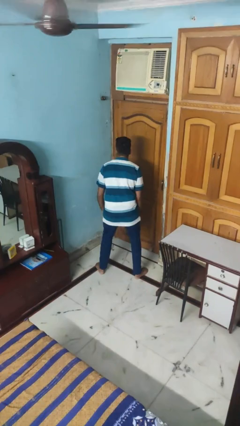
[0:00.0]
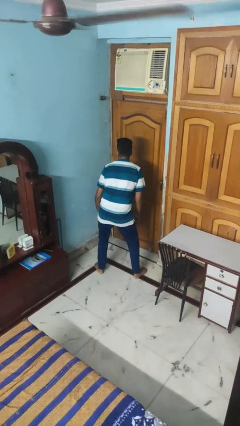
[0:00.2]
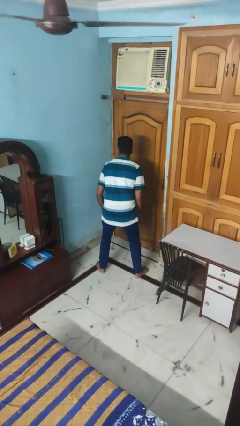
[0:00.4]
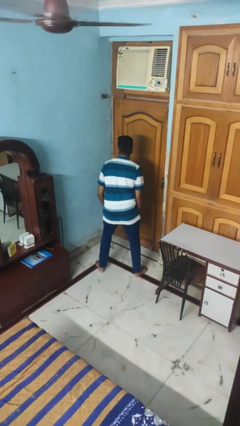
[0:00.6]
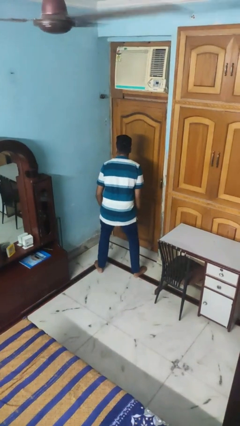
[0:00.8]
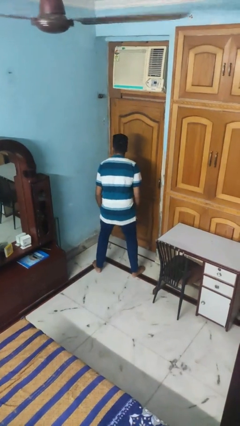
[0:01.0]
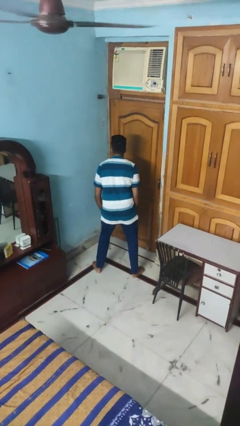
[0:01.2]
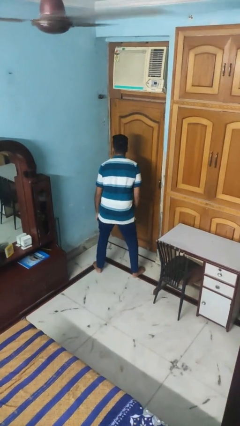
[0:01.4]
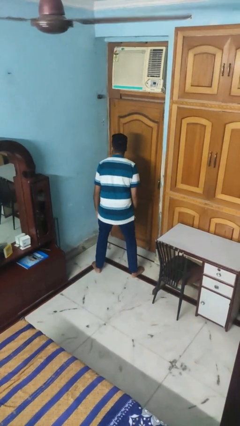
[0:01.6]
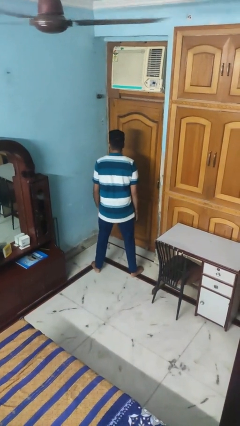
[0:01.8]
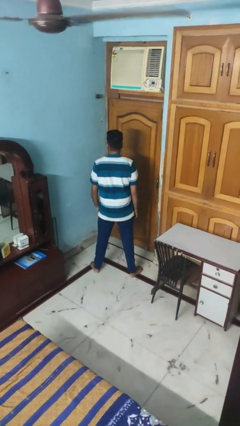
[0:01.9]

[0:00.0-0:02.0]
person wiggles hips

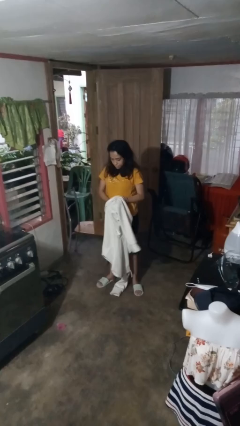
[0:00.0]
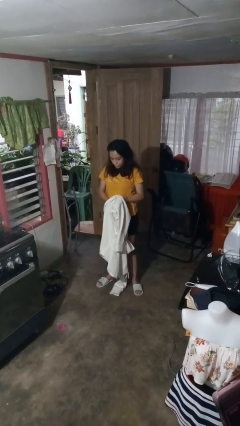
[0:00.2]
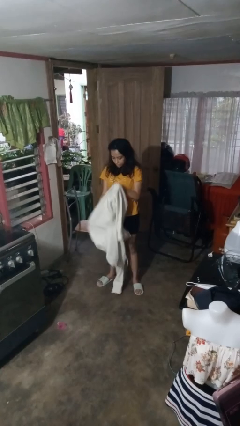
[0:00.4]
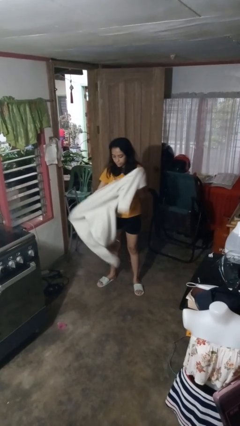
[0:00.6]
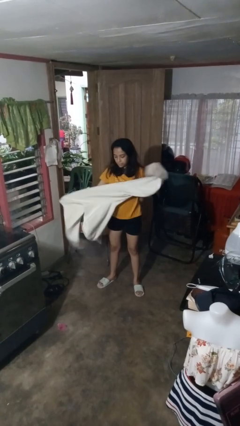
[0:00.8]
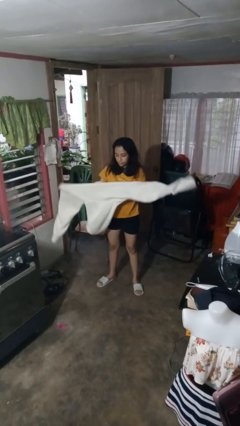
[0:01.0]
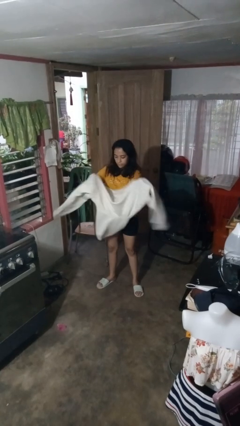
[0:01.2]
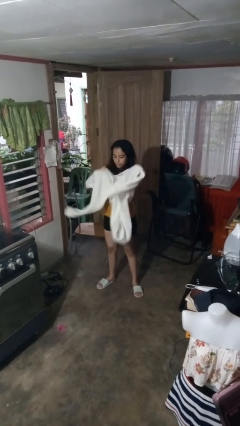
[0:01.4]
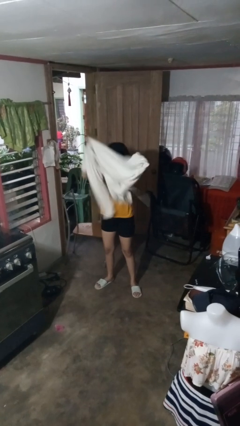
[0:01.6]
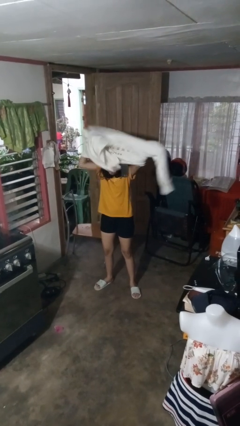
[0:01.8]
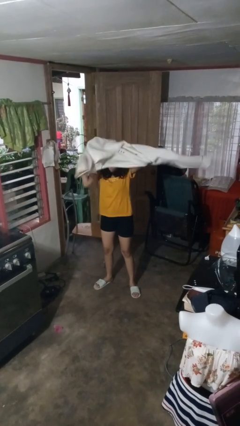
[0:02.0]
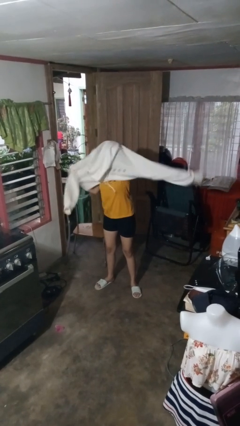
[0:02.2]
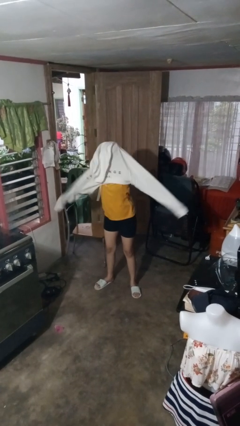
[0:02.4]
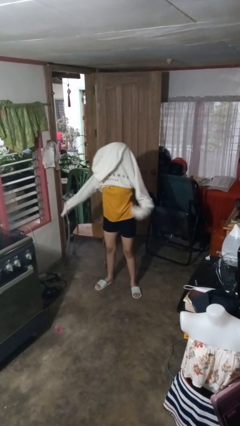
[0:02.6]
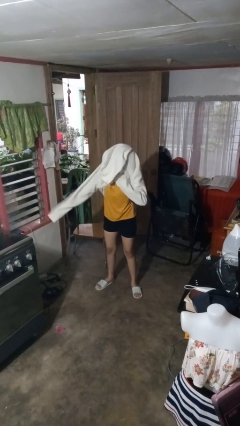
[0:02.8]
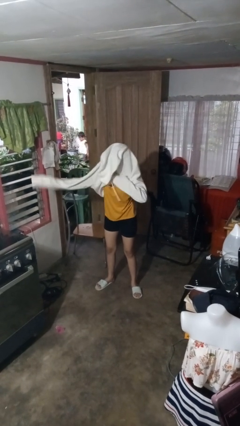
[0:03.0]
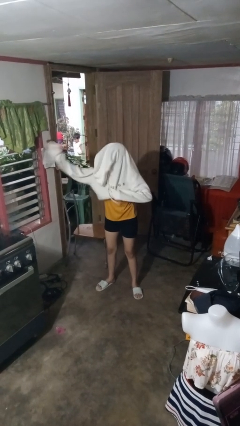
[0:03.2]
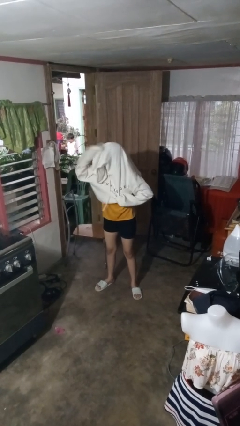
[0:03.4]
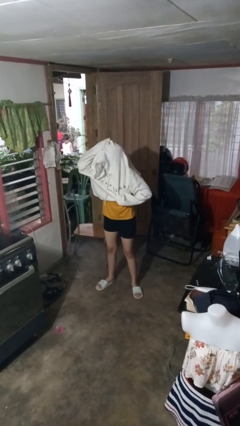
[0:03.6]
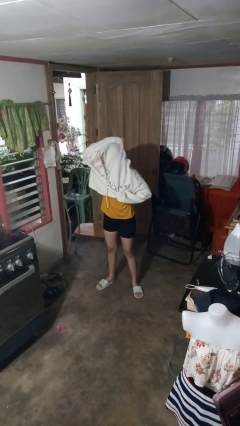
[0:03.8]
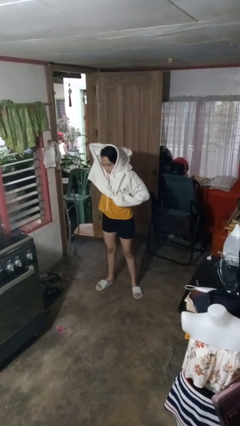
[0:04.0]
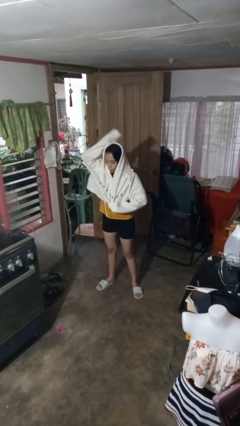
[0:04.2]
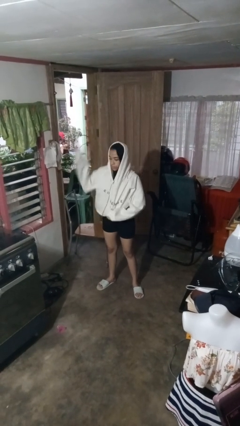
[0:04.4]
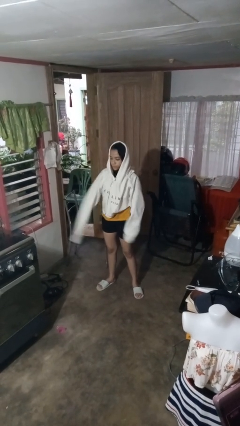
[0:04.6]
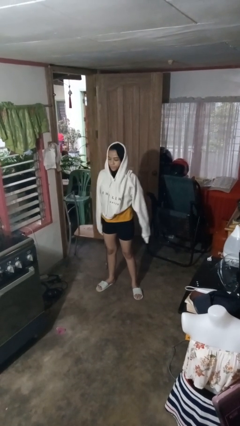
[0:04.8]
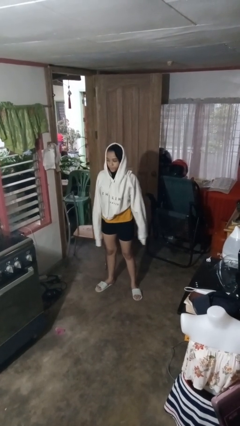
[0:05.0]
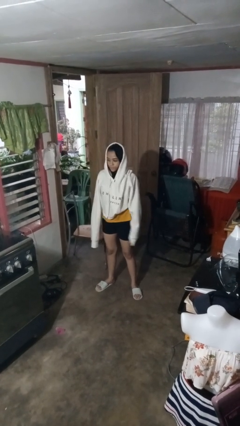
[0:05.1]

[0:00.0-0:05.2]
person puts on hoodie

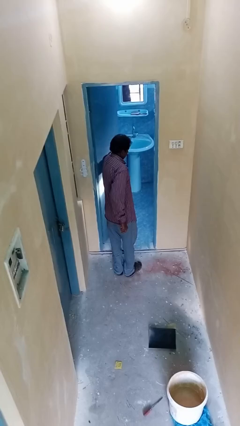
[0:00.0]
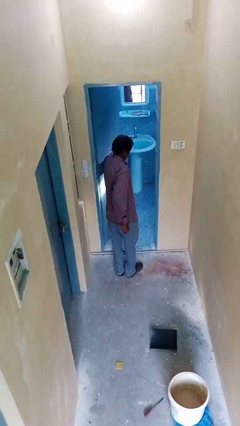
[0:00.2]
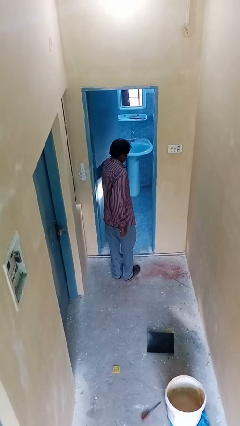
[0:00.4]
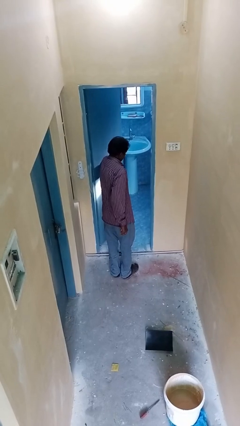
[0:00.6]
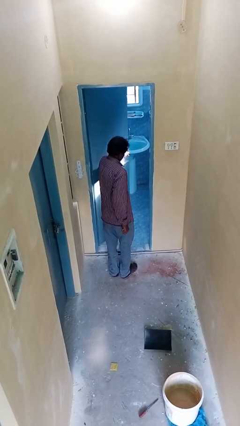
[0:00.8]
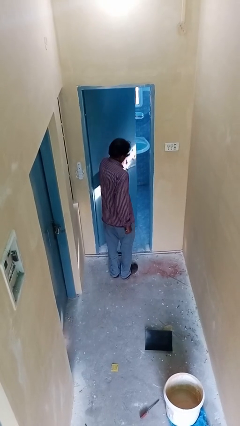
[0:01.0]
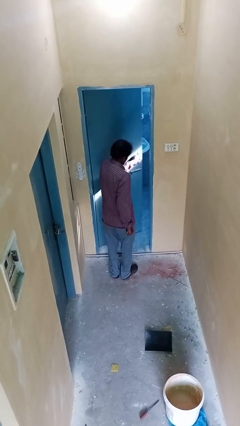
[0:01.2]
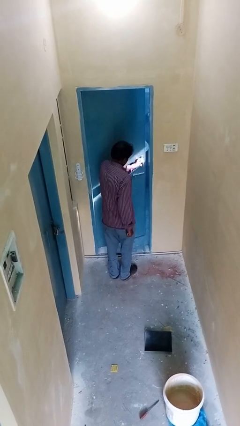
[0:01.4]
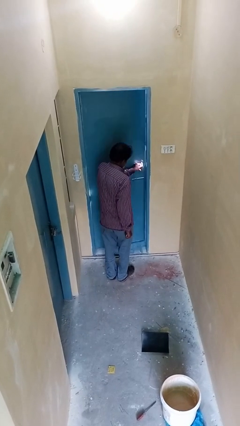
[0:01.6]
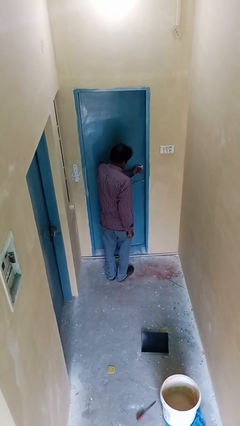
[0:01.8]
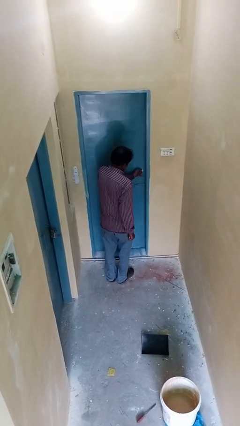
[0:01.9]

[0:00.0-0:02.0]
person closes facility door

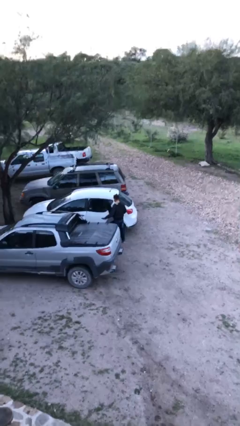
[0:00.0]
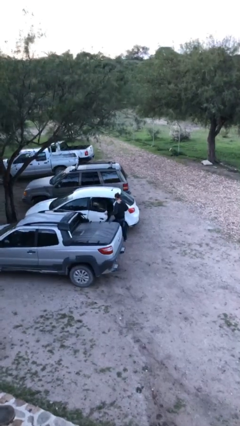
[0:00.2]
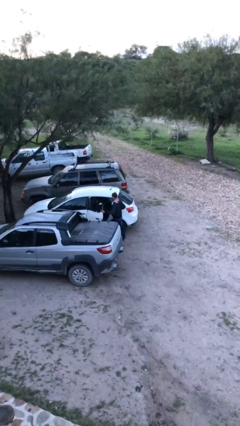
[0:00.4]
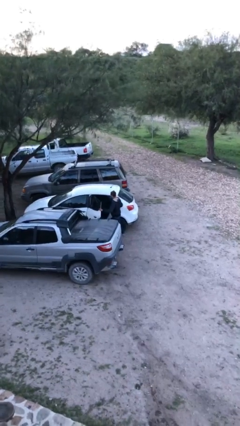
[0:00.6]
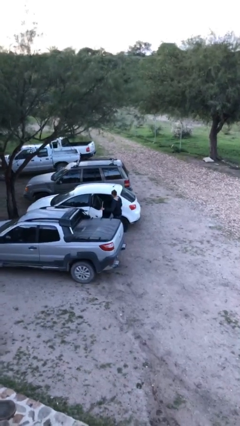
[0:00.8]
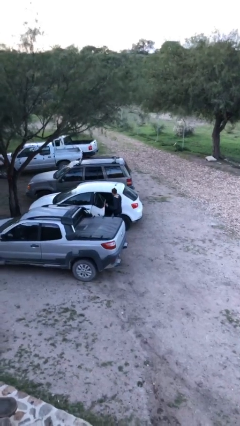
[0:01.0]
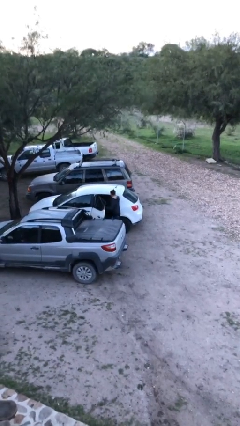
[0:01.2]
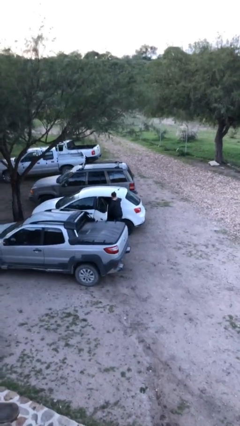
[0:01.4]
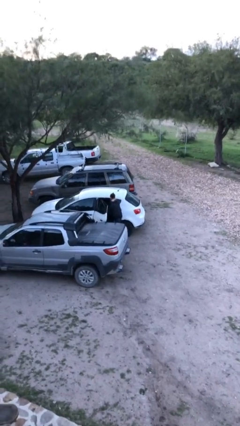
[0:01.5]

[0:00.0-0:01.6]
person opens car door

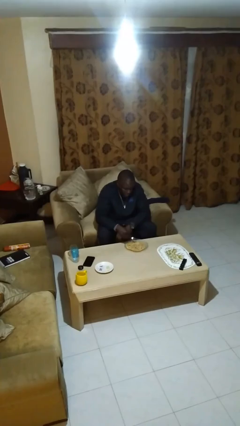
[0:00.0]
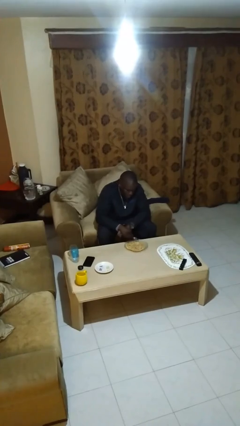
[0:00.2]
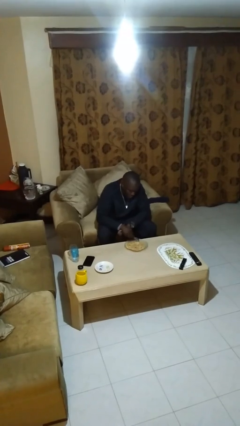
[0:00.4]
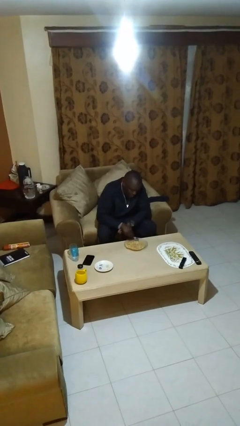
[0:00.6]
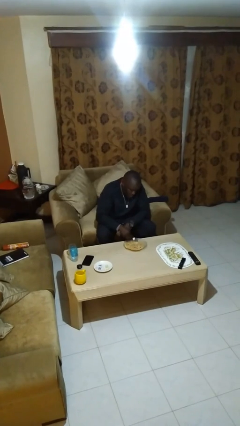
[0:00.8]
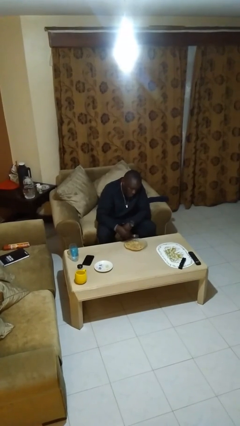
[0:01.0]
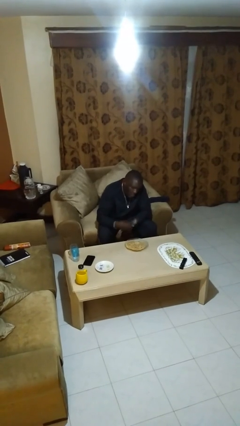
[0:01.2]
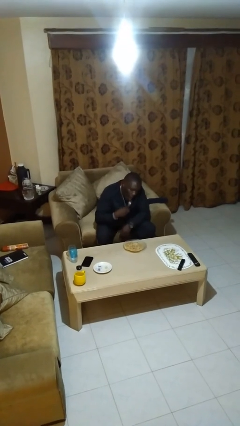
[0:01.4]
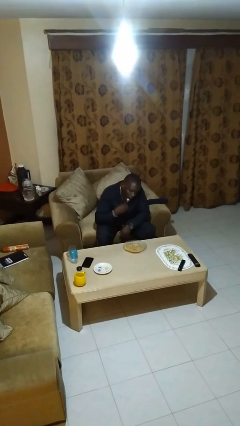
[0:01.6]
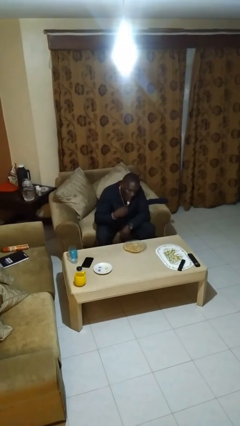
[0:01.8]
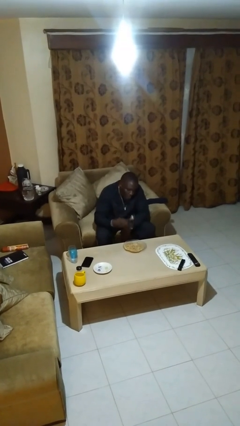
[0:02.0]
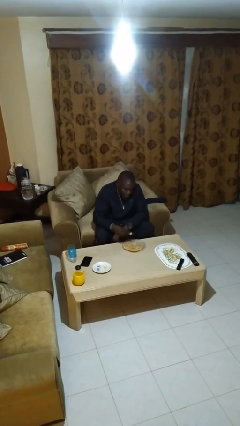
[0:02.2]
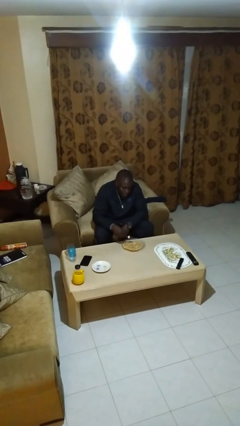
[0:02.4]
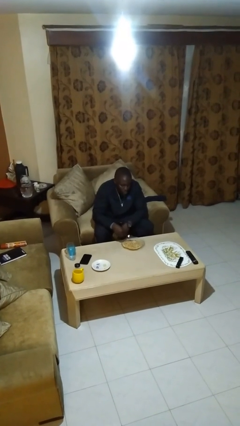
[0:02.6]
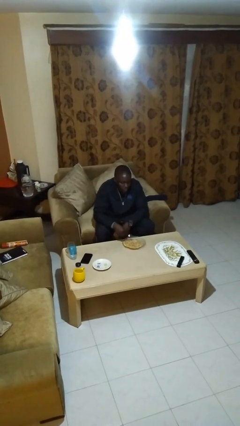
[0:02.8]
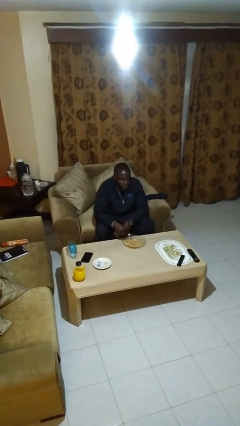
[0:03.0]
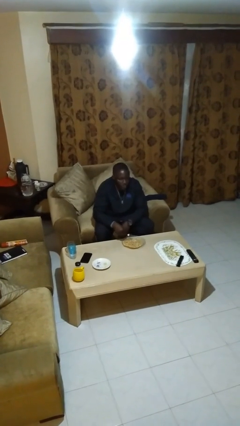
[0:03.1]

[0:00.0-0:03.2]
person eats with utensil

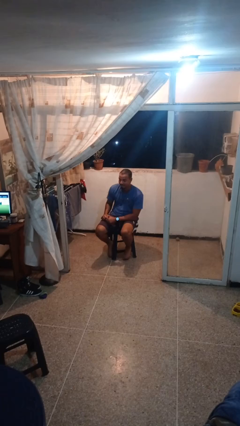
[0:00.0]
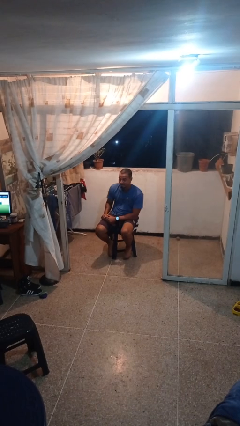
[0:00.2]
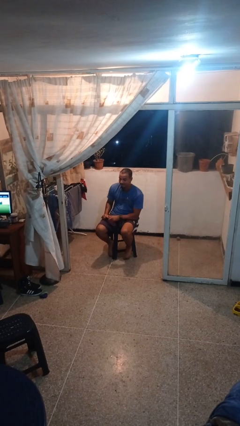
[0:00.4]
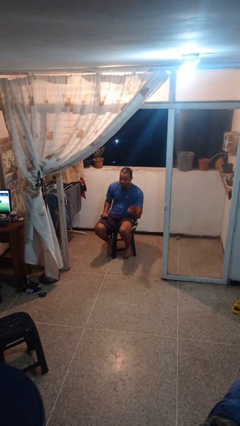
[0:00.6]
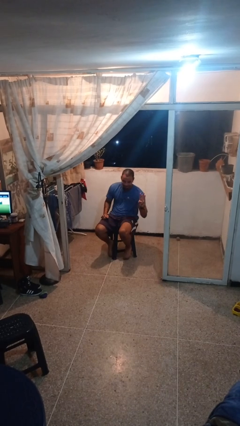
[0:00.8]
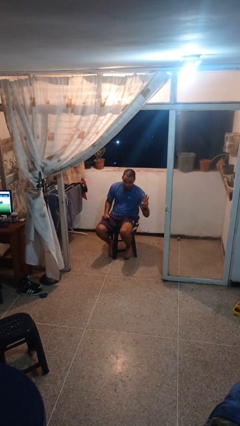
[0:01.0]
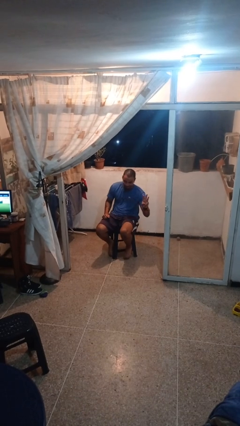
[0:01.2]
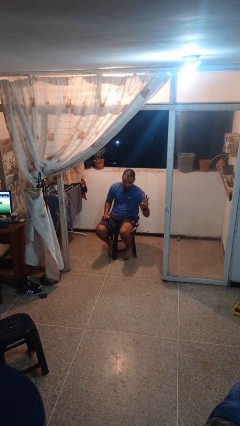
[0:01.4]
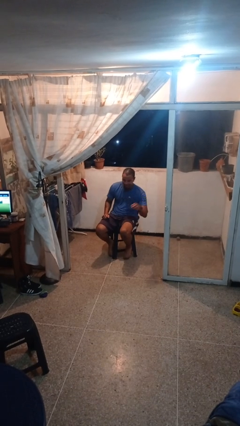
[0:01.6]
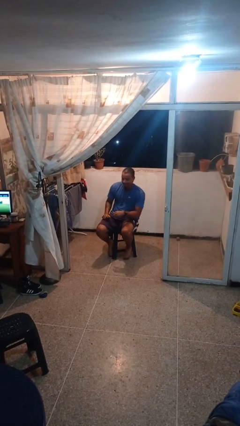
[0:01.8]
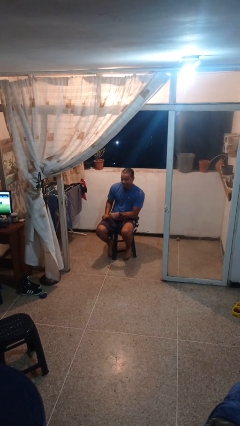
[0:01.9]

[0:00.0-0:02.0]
person gestures number three

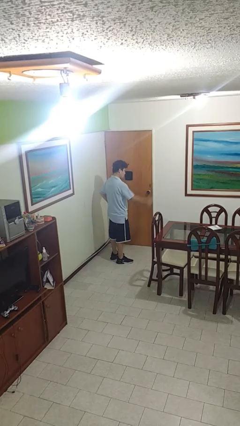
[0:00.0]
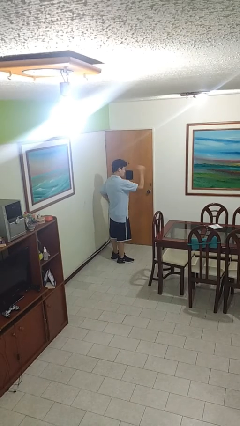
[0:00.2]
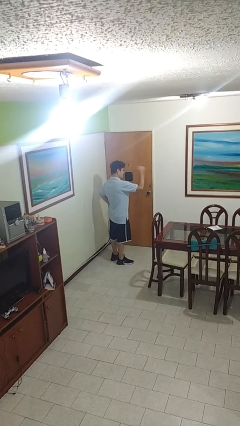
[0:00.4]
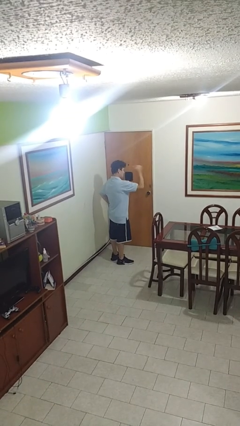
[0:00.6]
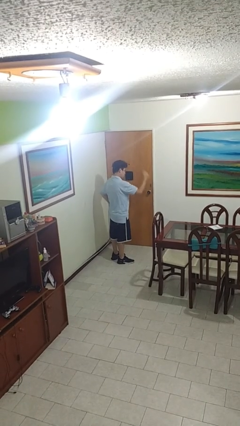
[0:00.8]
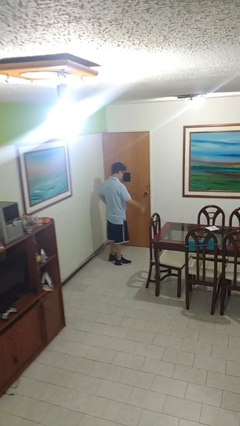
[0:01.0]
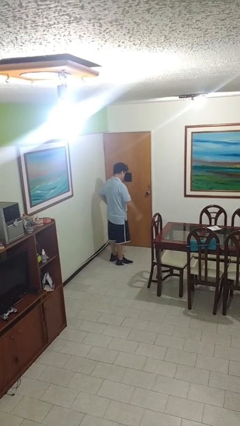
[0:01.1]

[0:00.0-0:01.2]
person gestures behind me
